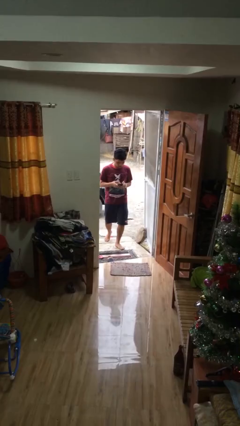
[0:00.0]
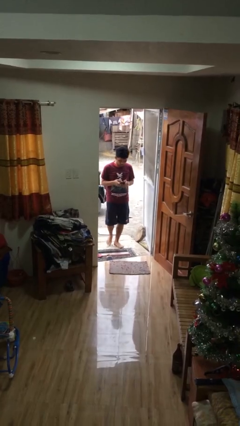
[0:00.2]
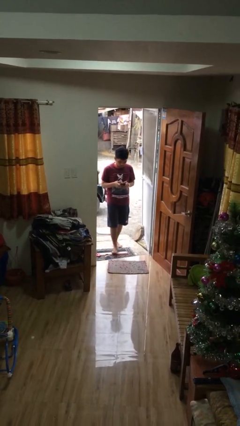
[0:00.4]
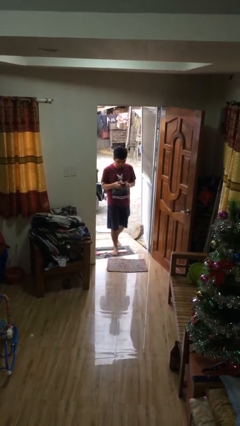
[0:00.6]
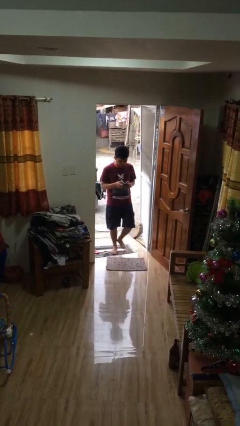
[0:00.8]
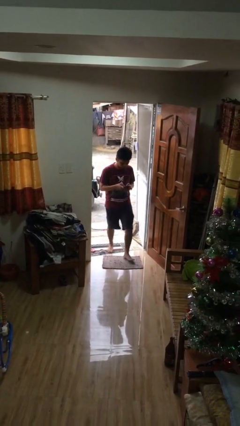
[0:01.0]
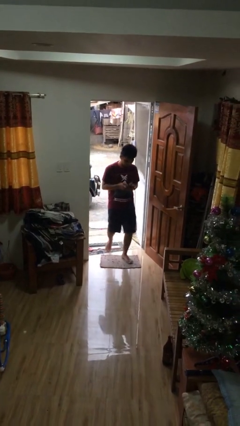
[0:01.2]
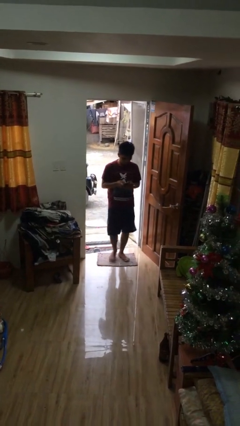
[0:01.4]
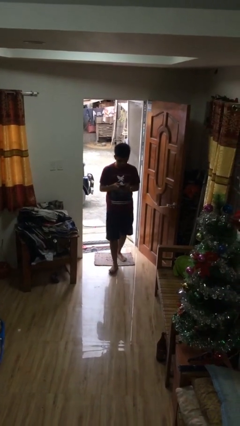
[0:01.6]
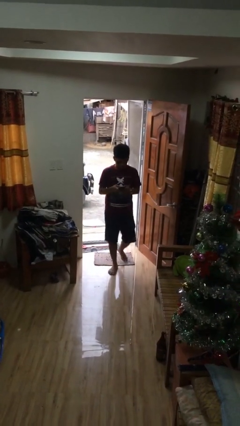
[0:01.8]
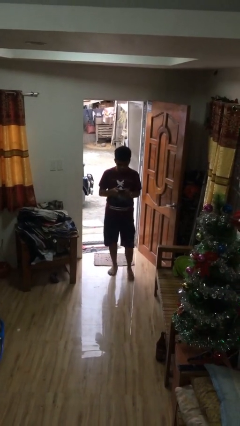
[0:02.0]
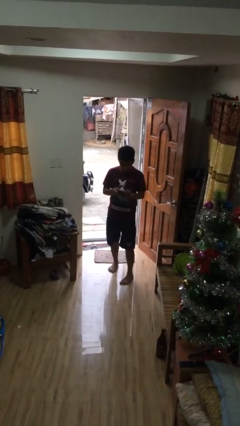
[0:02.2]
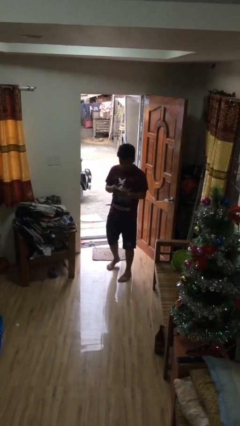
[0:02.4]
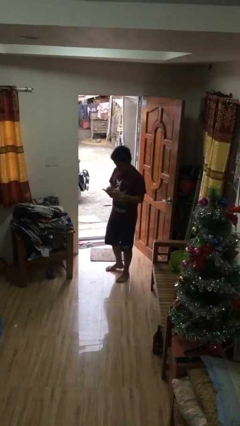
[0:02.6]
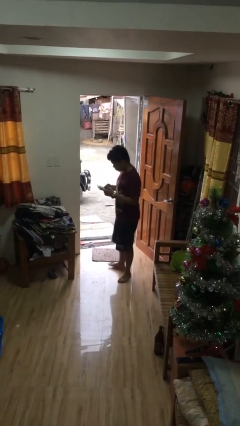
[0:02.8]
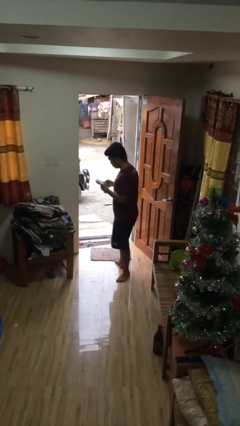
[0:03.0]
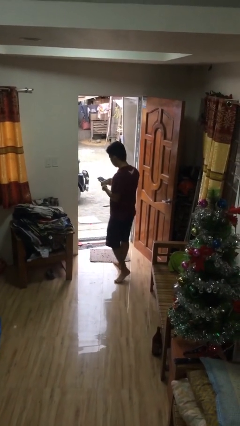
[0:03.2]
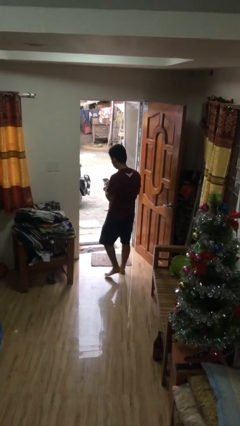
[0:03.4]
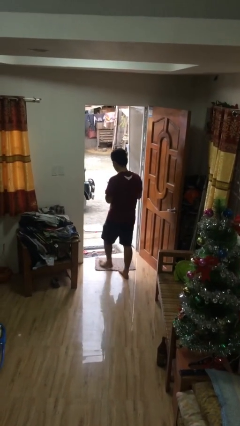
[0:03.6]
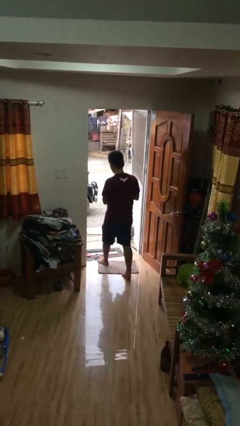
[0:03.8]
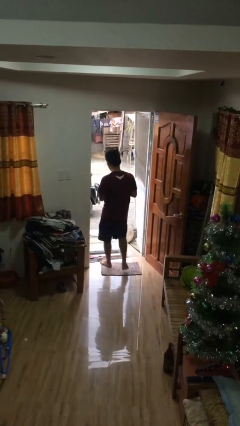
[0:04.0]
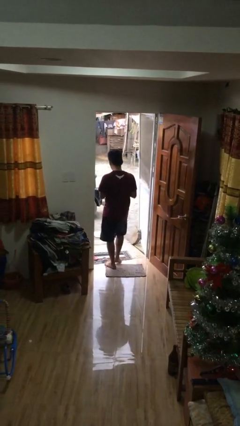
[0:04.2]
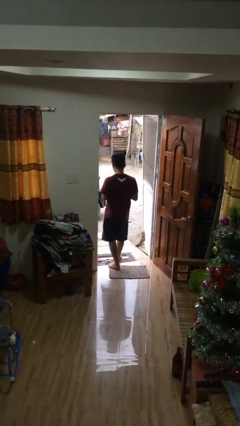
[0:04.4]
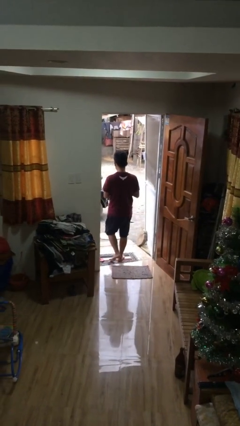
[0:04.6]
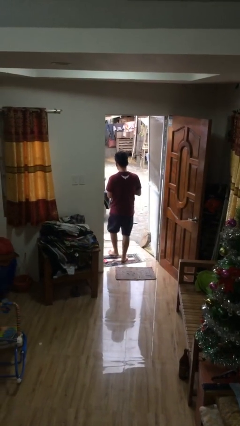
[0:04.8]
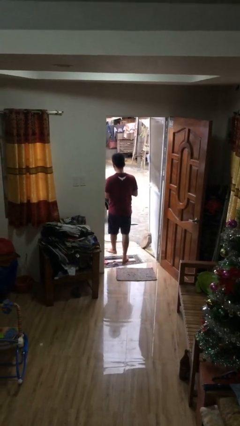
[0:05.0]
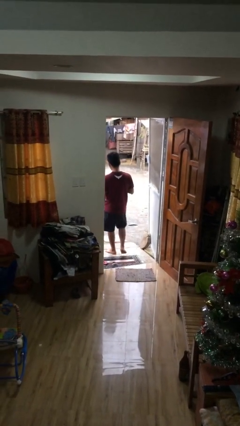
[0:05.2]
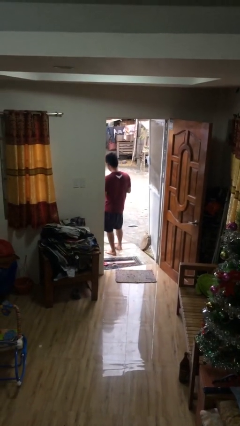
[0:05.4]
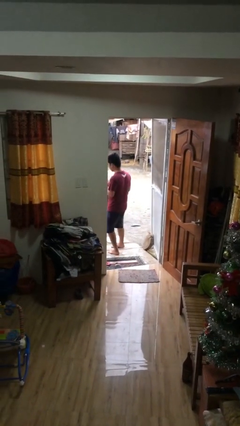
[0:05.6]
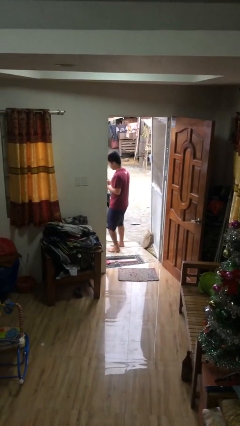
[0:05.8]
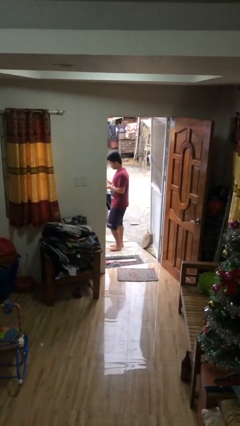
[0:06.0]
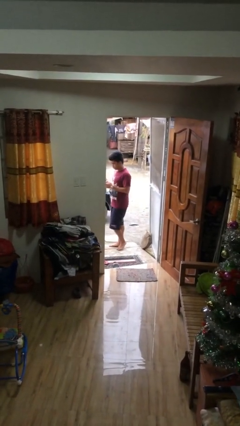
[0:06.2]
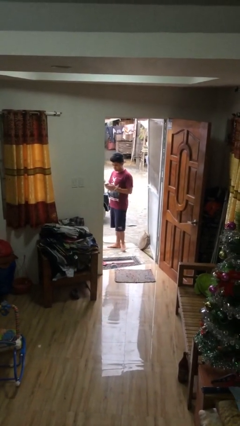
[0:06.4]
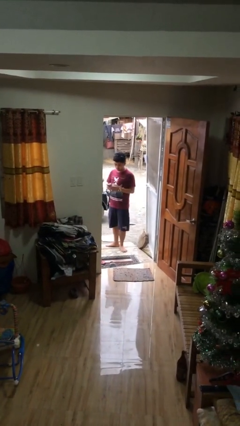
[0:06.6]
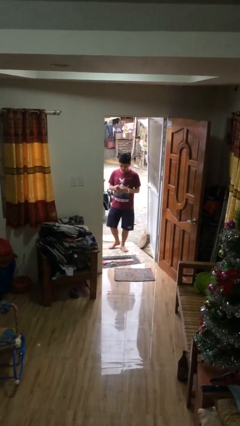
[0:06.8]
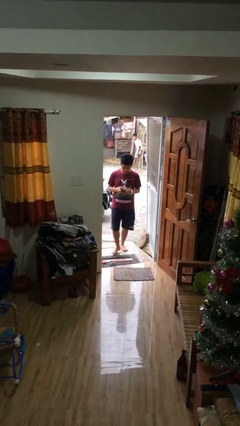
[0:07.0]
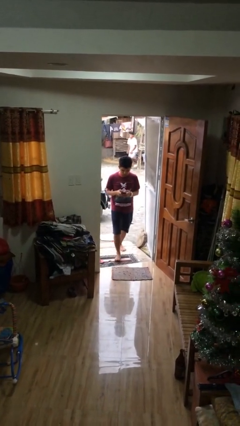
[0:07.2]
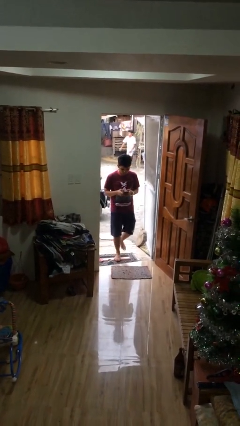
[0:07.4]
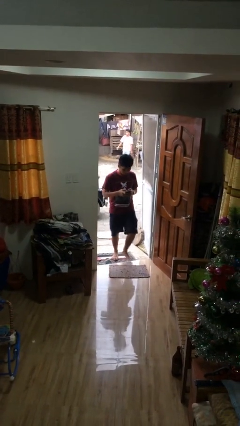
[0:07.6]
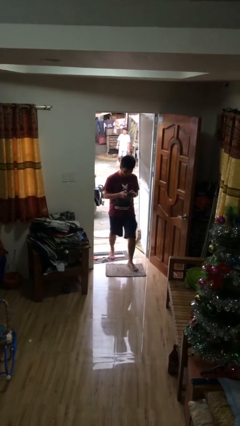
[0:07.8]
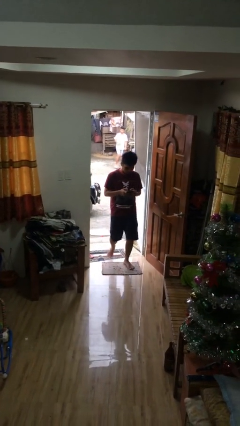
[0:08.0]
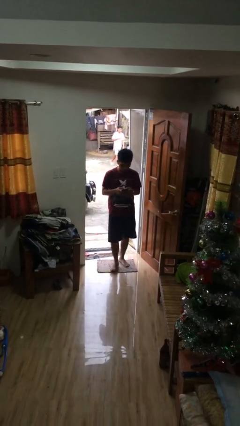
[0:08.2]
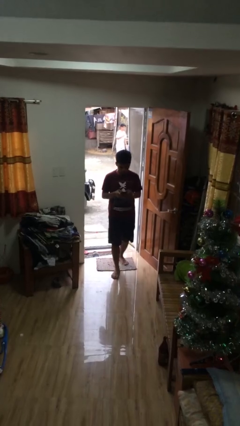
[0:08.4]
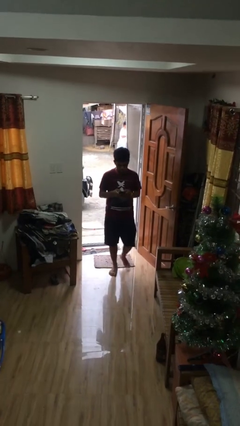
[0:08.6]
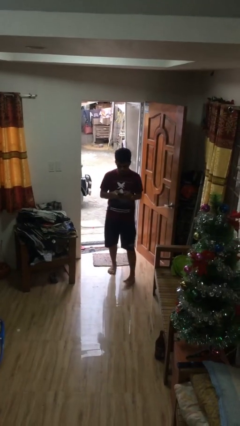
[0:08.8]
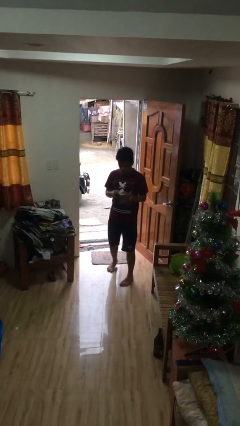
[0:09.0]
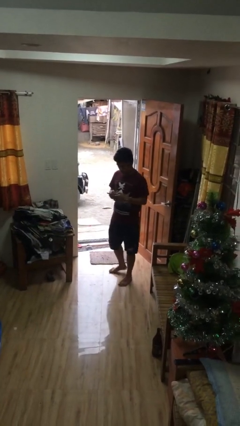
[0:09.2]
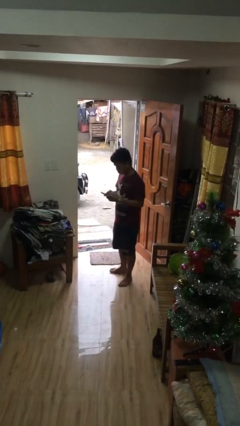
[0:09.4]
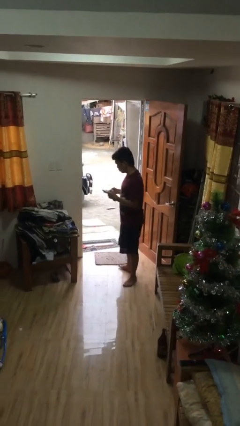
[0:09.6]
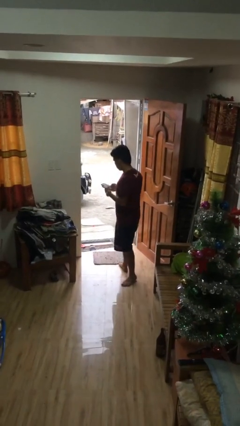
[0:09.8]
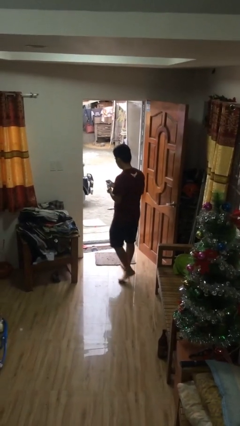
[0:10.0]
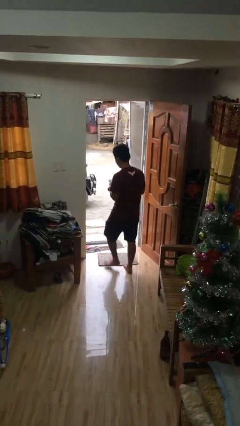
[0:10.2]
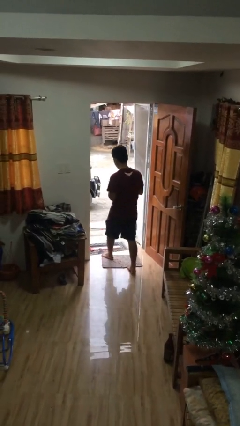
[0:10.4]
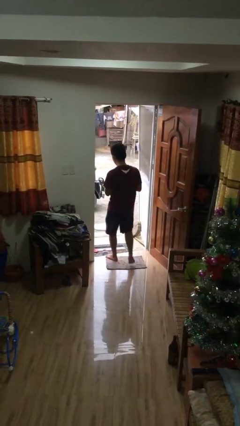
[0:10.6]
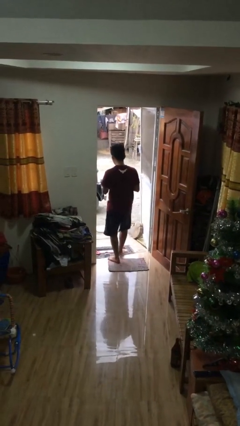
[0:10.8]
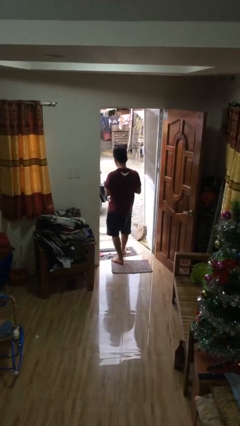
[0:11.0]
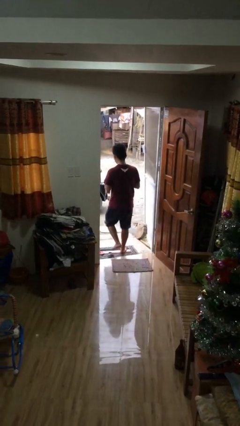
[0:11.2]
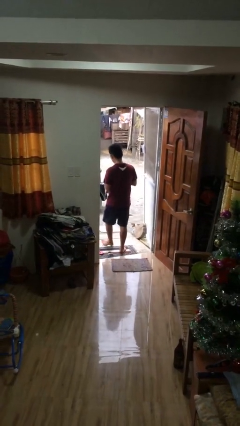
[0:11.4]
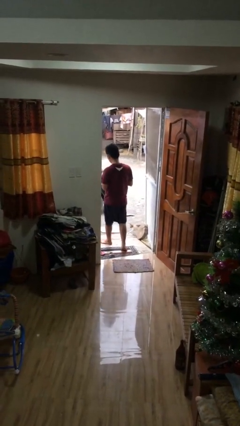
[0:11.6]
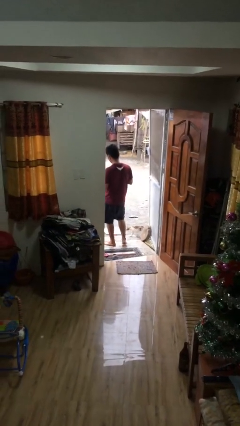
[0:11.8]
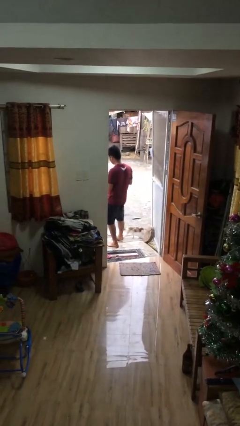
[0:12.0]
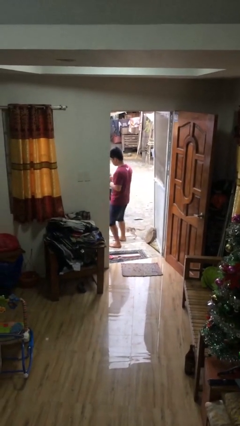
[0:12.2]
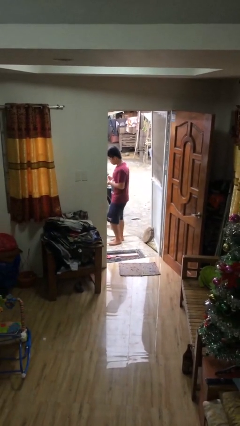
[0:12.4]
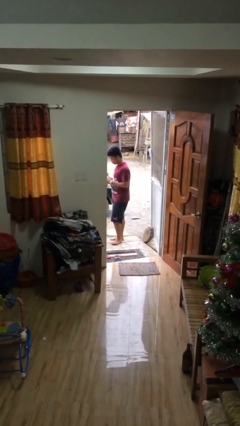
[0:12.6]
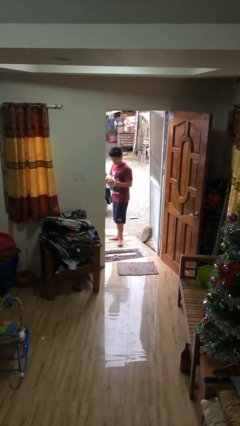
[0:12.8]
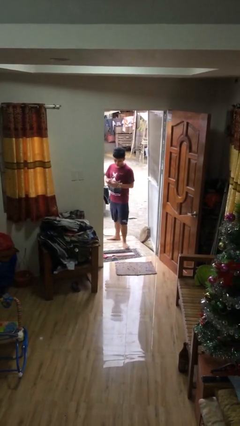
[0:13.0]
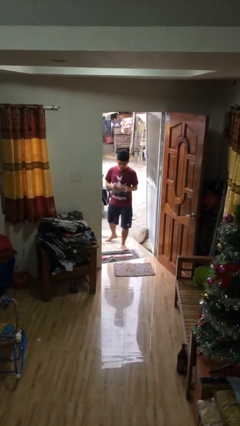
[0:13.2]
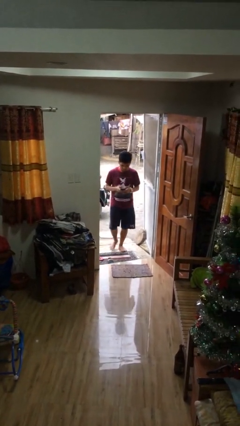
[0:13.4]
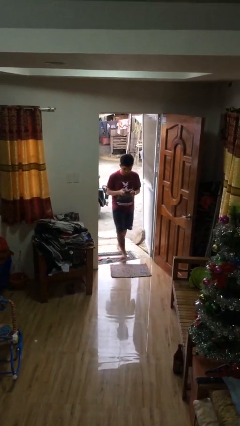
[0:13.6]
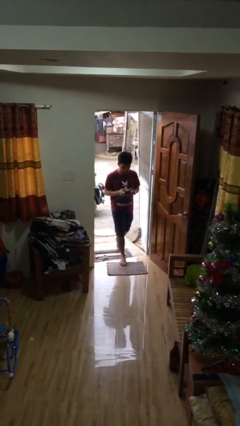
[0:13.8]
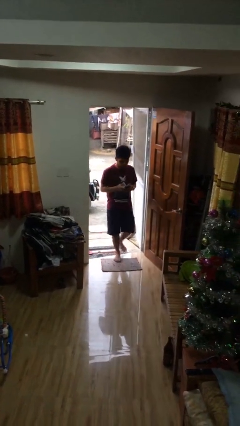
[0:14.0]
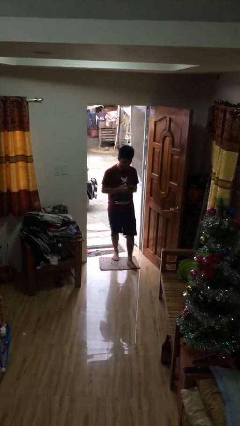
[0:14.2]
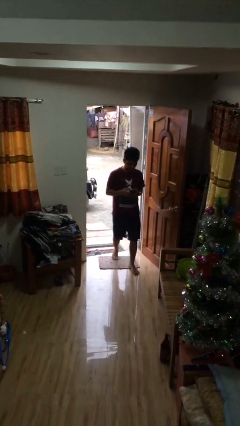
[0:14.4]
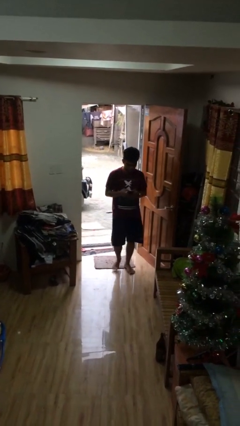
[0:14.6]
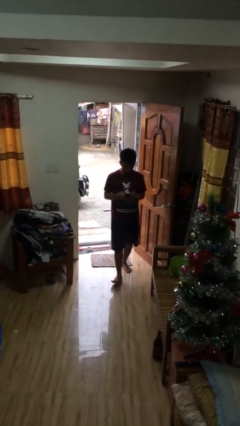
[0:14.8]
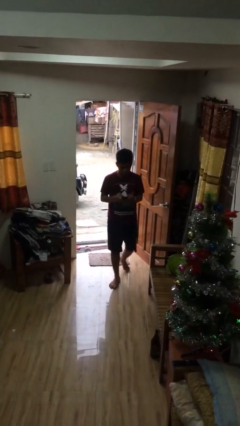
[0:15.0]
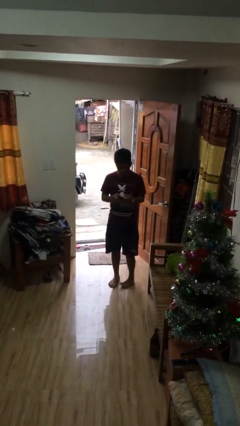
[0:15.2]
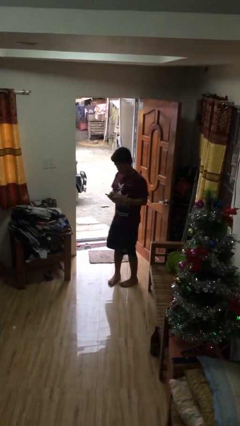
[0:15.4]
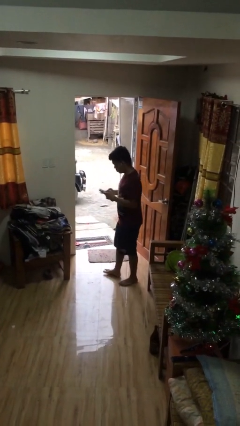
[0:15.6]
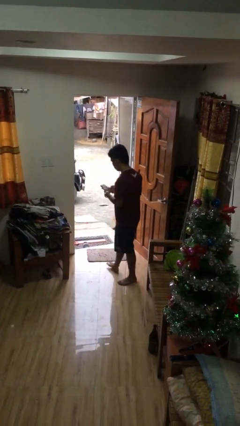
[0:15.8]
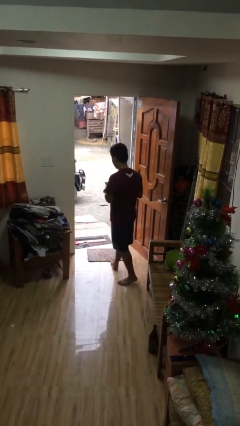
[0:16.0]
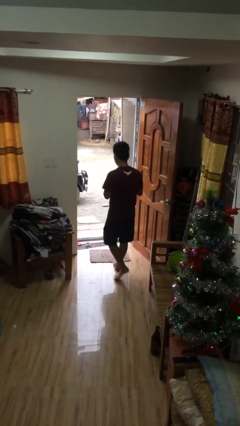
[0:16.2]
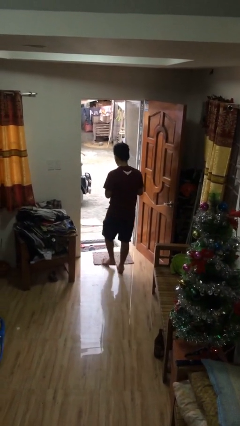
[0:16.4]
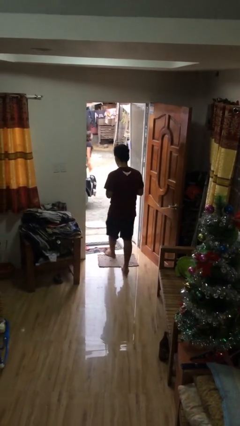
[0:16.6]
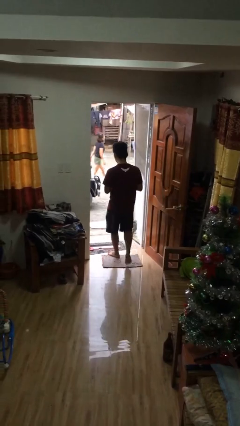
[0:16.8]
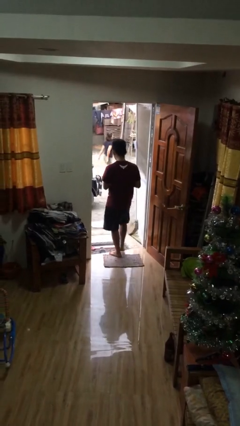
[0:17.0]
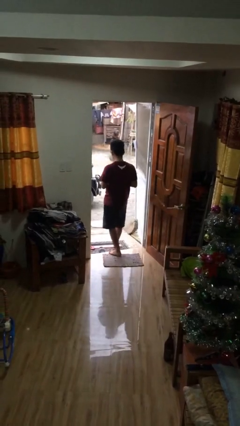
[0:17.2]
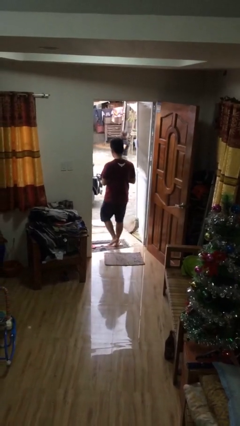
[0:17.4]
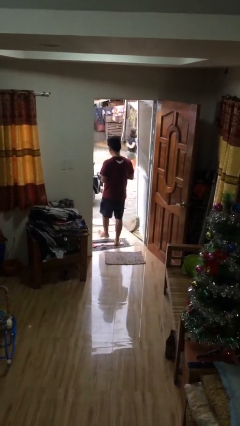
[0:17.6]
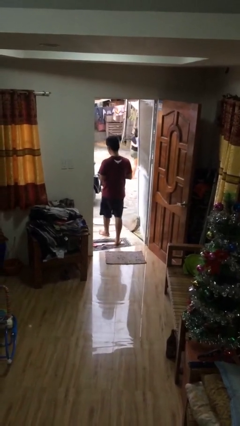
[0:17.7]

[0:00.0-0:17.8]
person texts on phone

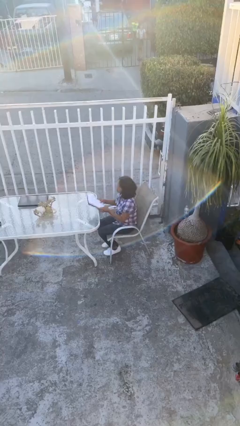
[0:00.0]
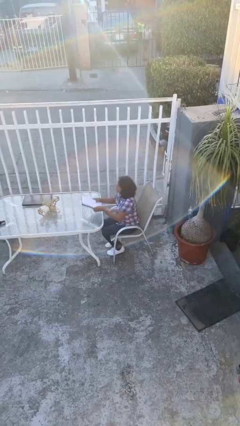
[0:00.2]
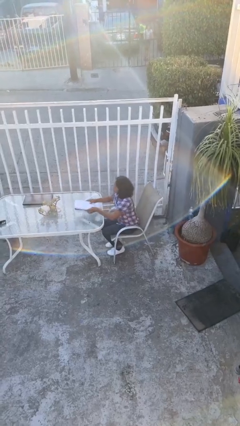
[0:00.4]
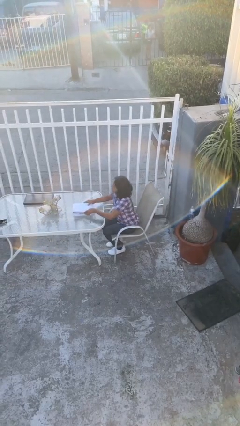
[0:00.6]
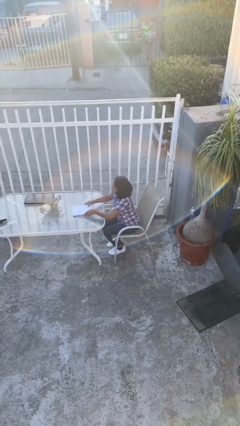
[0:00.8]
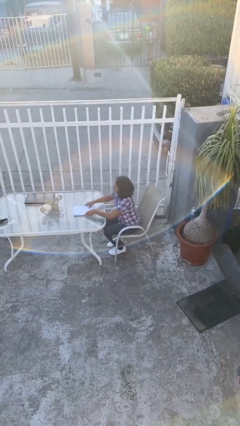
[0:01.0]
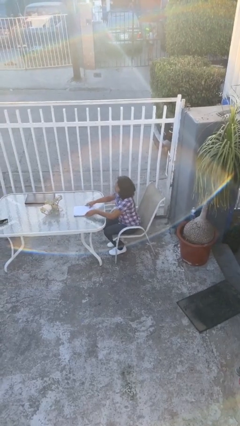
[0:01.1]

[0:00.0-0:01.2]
person puts down object on table
